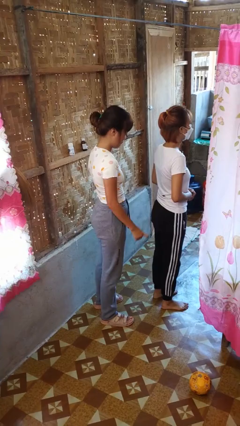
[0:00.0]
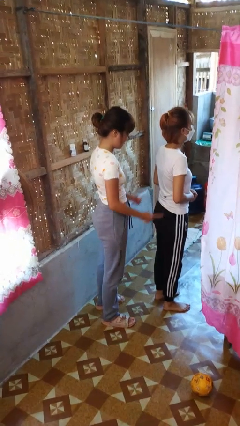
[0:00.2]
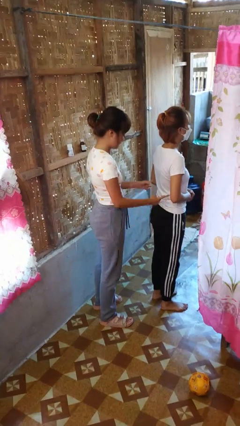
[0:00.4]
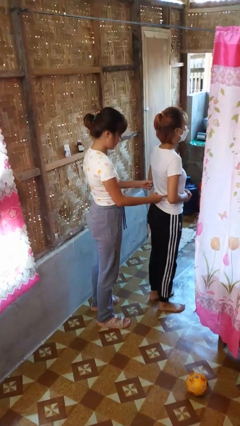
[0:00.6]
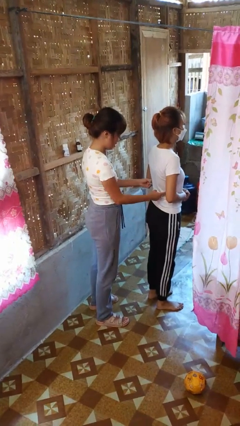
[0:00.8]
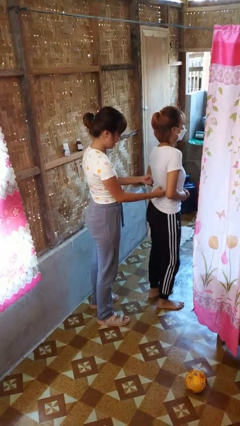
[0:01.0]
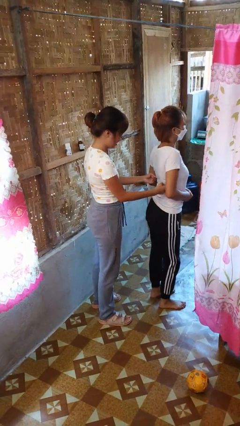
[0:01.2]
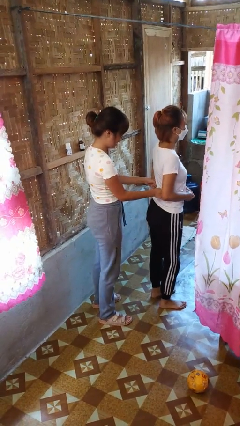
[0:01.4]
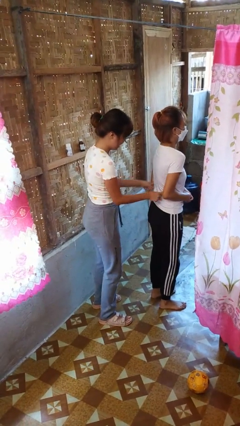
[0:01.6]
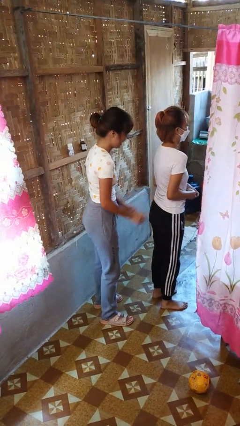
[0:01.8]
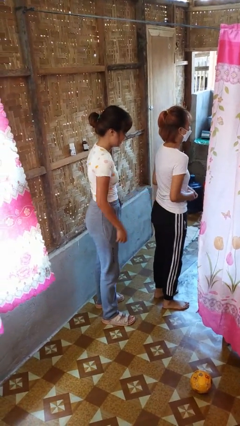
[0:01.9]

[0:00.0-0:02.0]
person tickles person

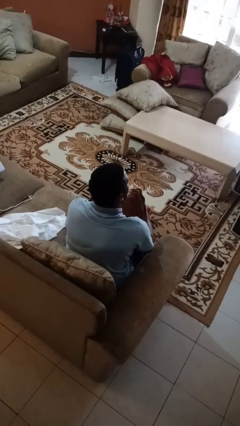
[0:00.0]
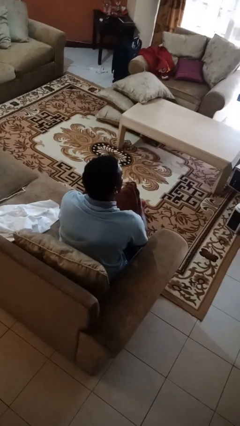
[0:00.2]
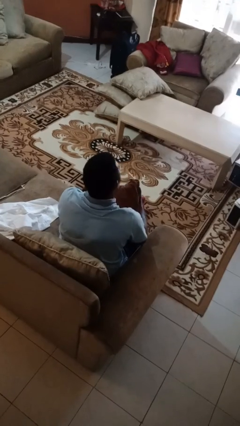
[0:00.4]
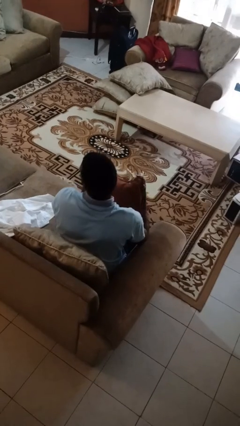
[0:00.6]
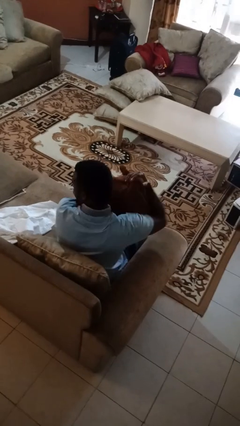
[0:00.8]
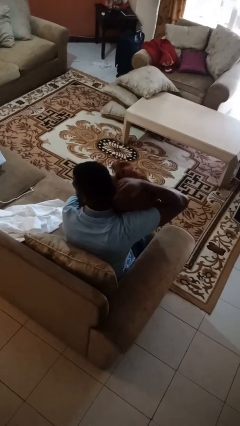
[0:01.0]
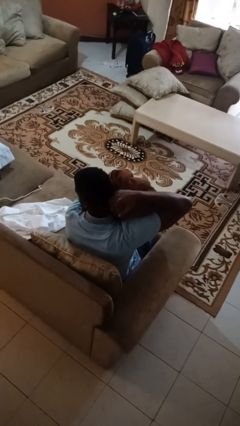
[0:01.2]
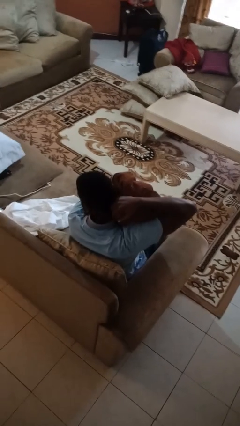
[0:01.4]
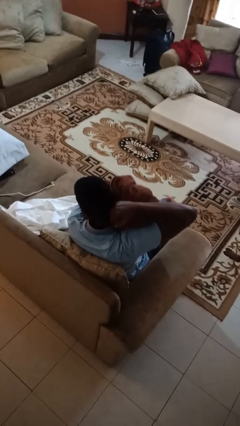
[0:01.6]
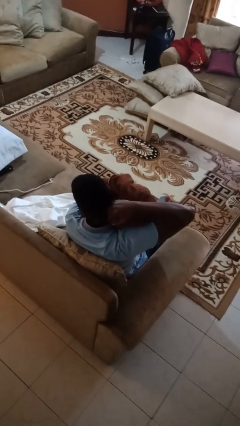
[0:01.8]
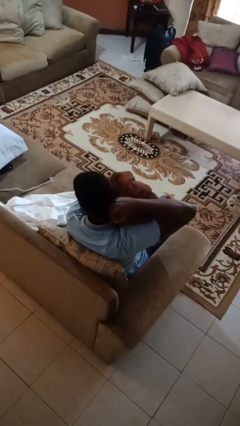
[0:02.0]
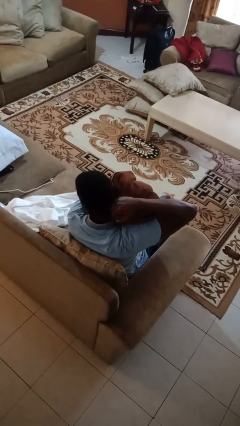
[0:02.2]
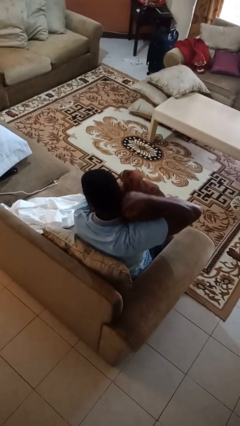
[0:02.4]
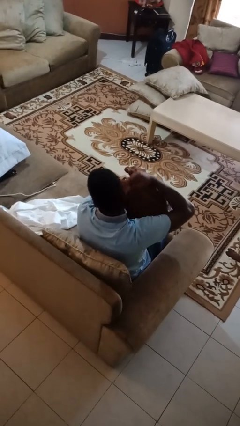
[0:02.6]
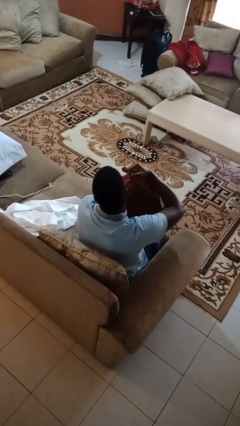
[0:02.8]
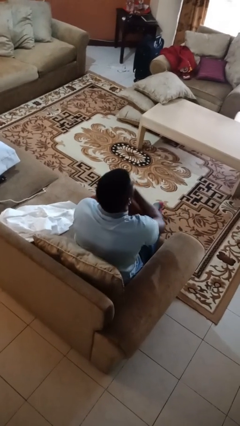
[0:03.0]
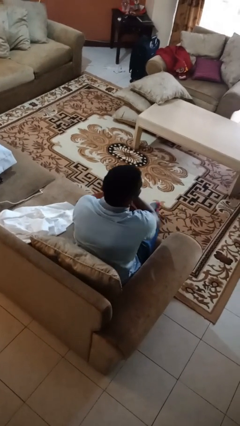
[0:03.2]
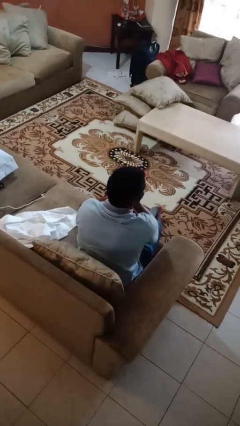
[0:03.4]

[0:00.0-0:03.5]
person hugs stuffed animal

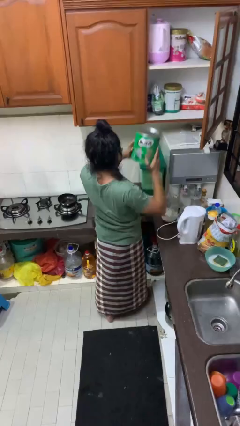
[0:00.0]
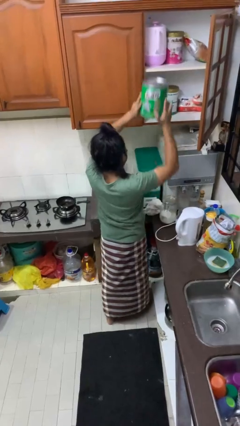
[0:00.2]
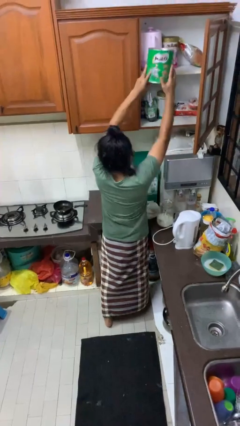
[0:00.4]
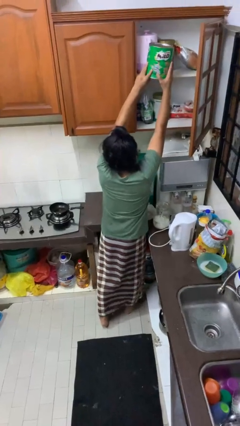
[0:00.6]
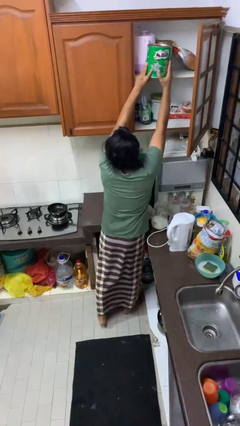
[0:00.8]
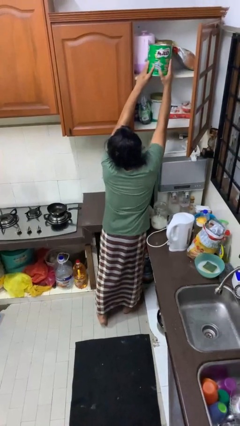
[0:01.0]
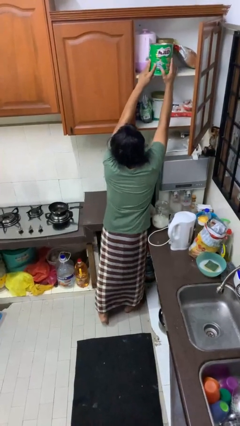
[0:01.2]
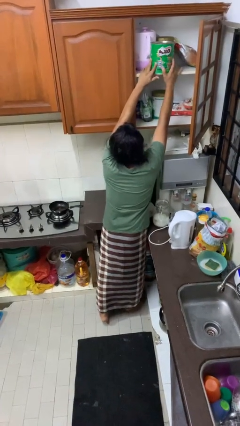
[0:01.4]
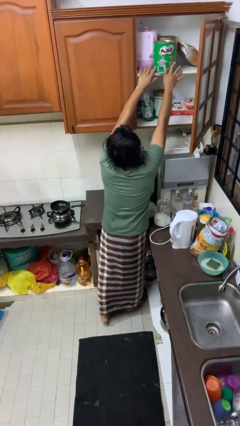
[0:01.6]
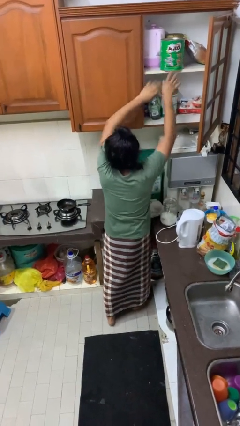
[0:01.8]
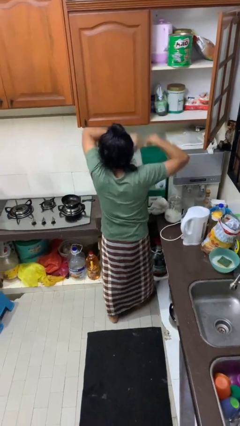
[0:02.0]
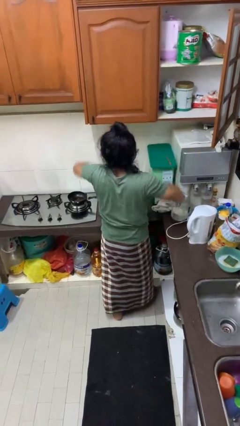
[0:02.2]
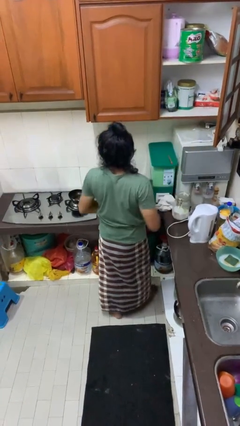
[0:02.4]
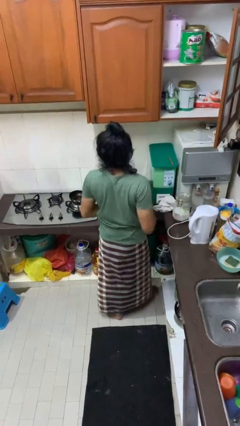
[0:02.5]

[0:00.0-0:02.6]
person puts object in cabinet

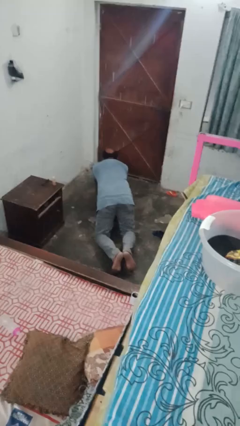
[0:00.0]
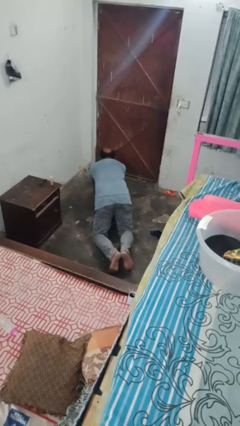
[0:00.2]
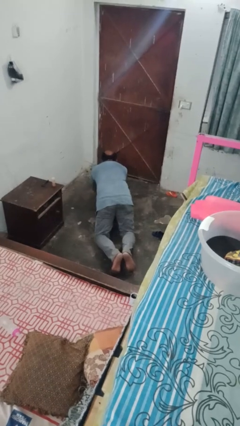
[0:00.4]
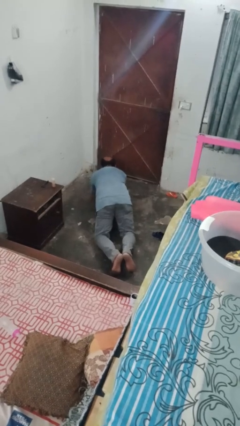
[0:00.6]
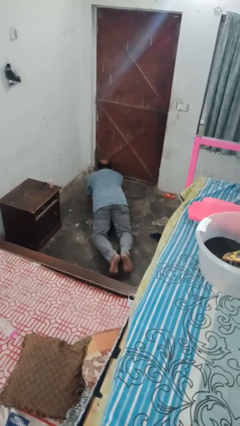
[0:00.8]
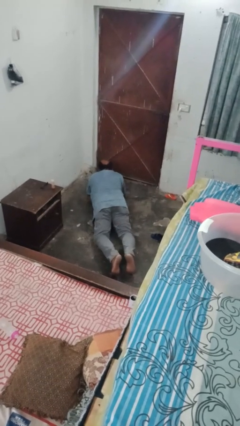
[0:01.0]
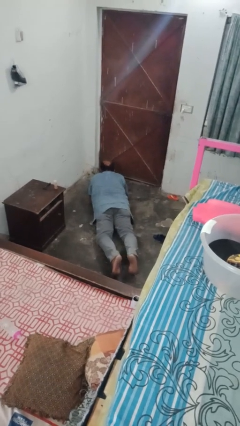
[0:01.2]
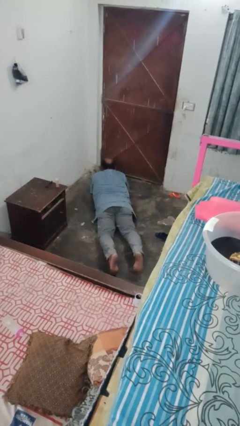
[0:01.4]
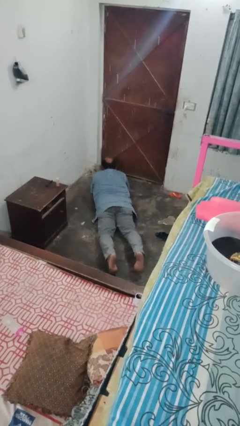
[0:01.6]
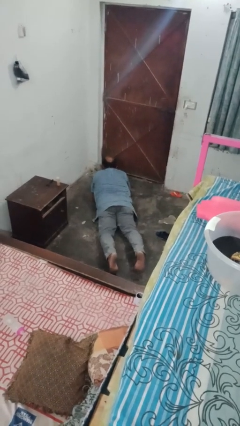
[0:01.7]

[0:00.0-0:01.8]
person stands up from floor

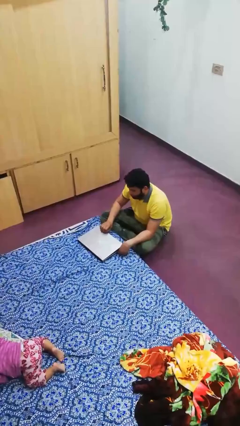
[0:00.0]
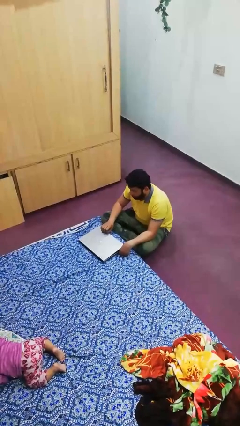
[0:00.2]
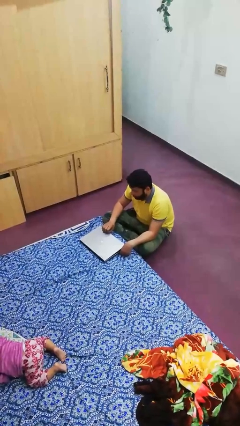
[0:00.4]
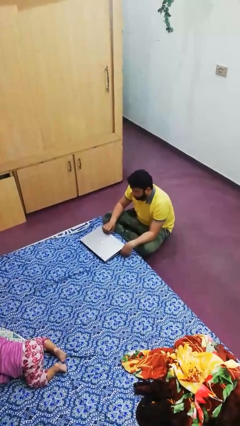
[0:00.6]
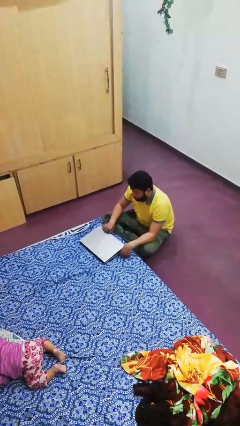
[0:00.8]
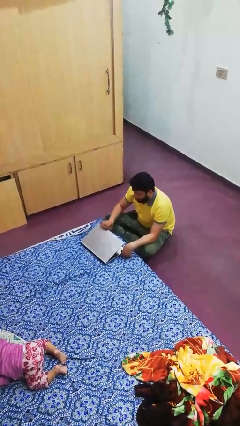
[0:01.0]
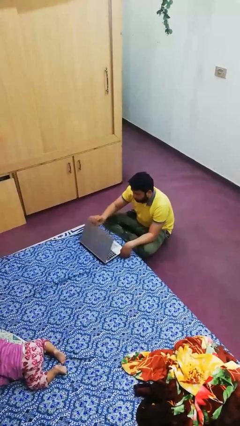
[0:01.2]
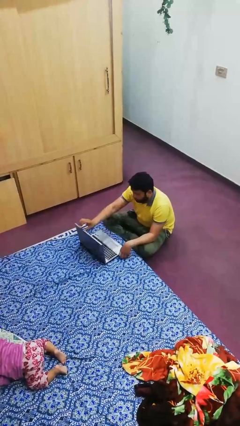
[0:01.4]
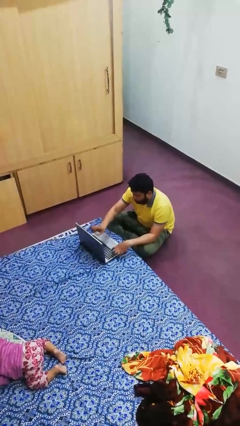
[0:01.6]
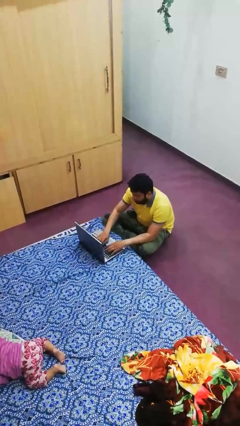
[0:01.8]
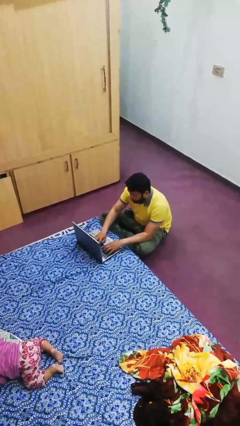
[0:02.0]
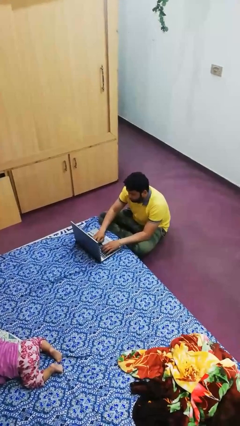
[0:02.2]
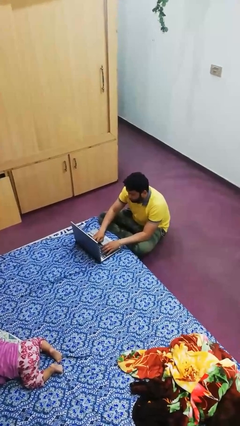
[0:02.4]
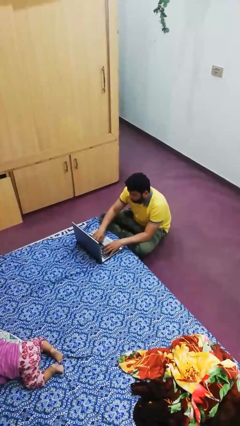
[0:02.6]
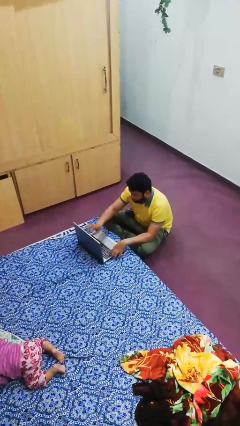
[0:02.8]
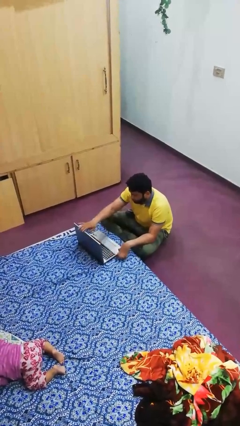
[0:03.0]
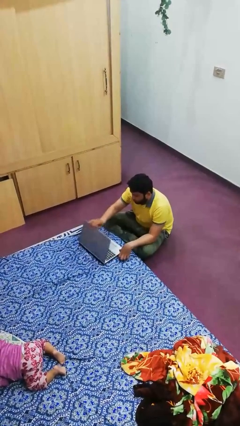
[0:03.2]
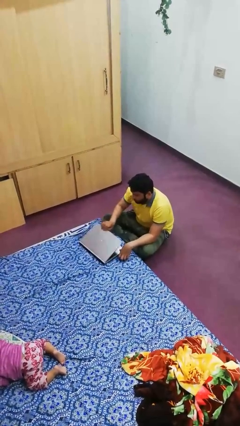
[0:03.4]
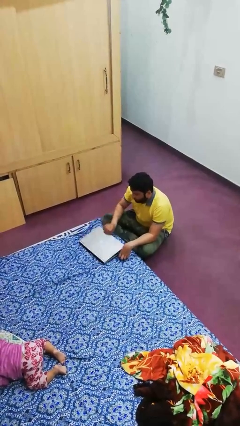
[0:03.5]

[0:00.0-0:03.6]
person interacts with laptop

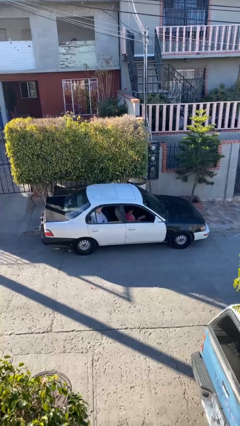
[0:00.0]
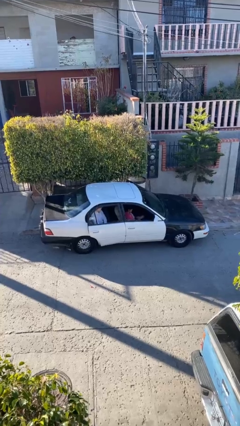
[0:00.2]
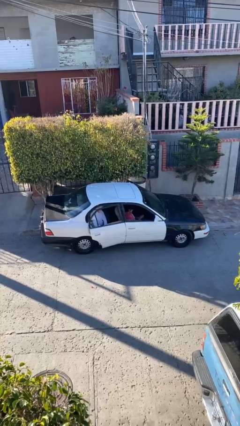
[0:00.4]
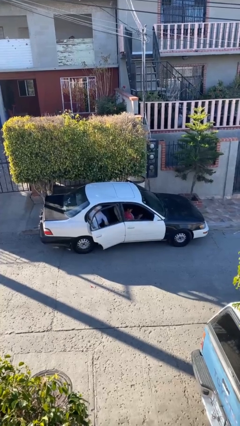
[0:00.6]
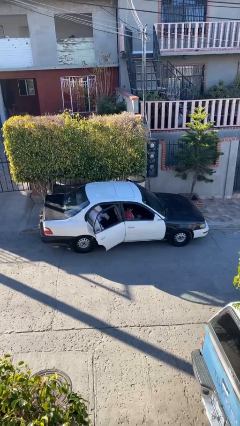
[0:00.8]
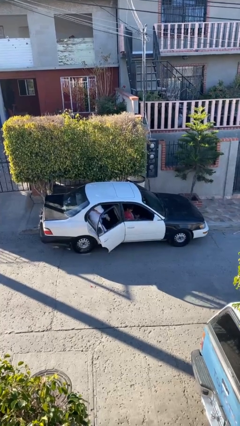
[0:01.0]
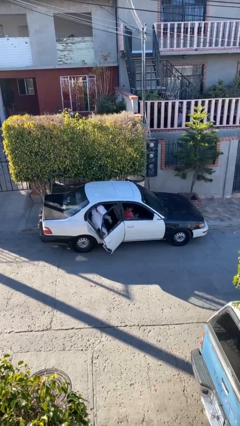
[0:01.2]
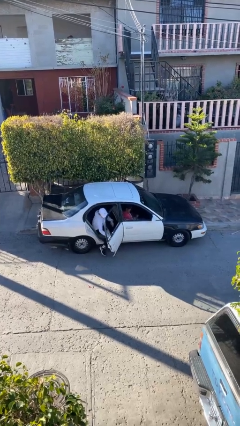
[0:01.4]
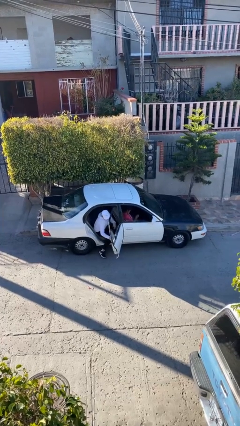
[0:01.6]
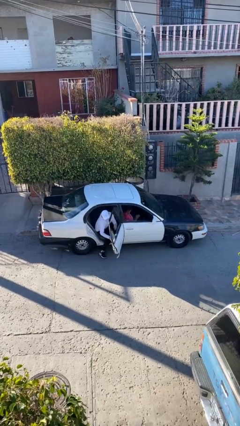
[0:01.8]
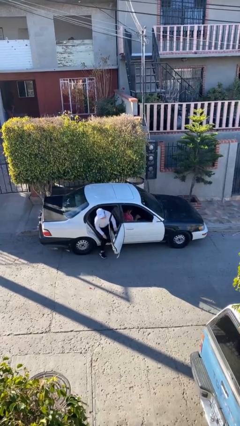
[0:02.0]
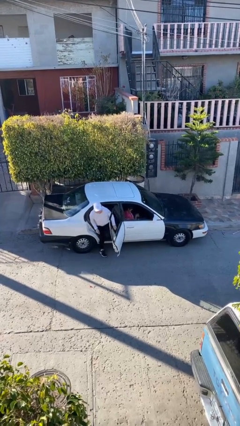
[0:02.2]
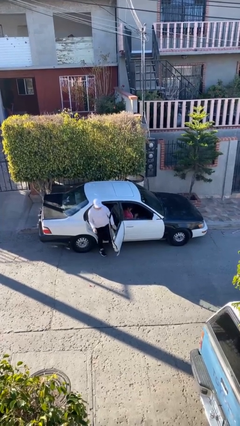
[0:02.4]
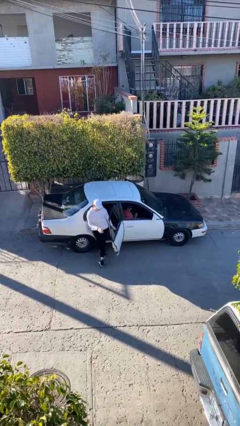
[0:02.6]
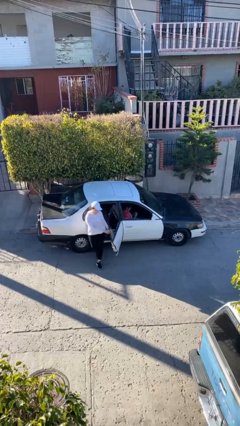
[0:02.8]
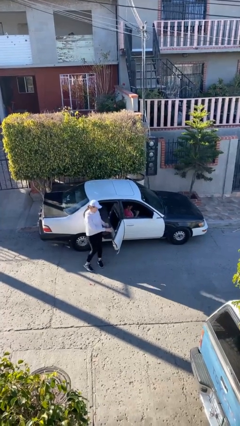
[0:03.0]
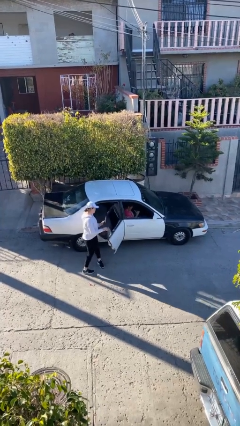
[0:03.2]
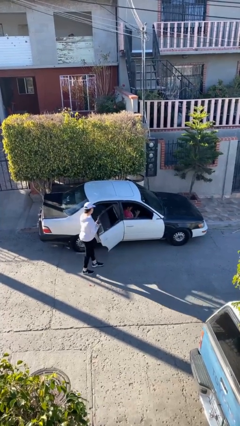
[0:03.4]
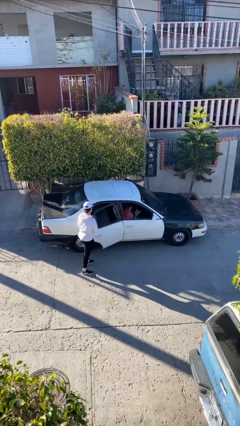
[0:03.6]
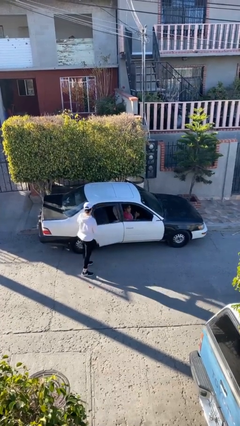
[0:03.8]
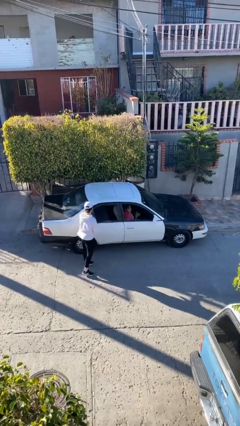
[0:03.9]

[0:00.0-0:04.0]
car drops off person
